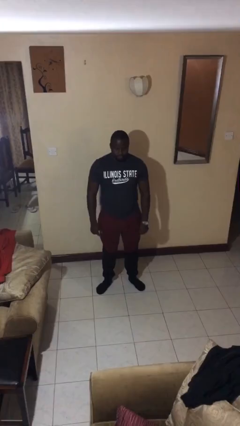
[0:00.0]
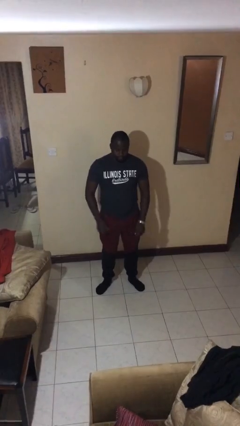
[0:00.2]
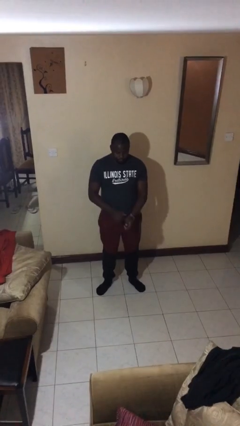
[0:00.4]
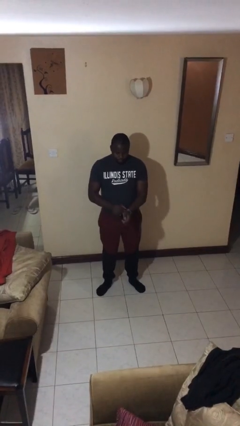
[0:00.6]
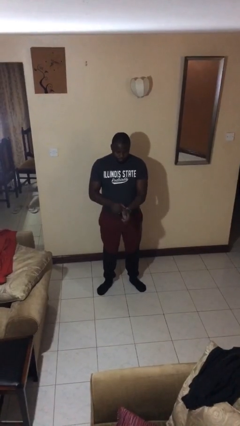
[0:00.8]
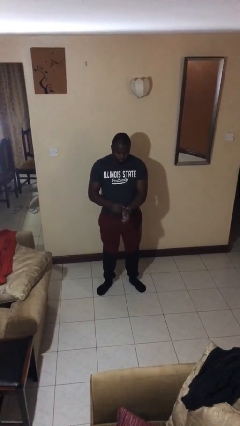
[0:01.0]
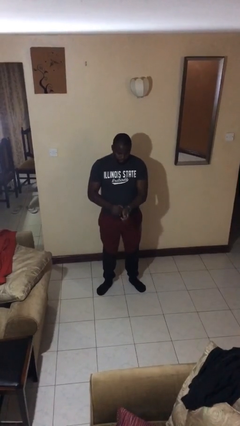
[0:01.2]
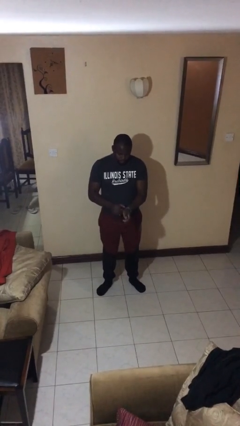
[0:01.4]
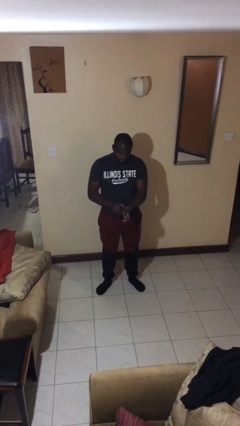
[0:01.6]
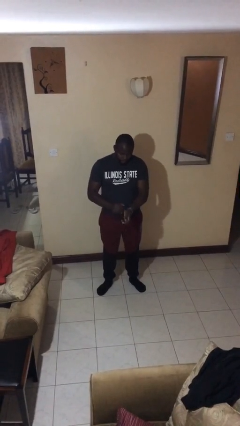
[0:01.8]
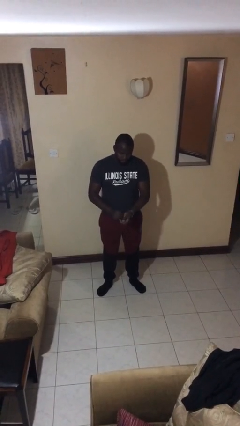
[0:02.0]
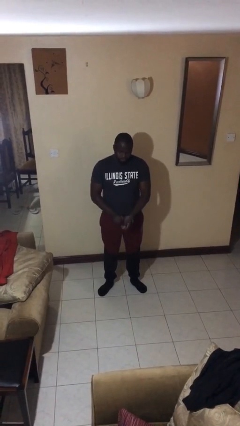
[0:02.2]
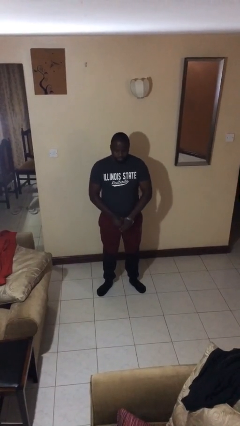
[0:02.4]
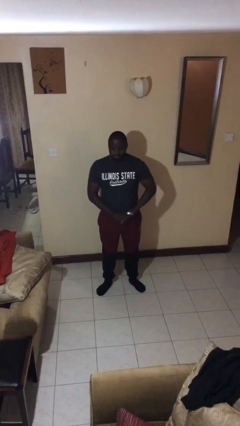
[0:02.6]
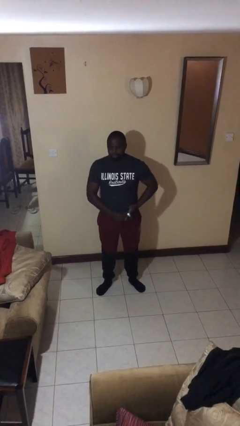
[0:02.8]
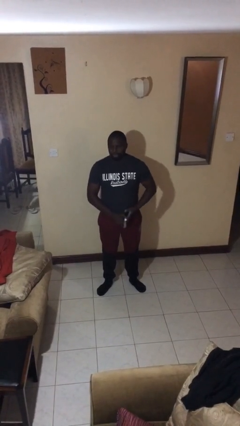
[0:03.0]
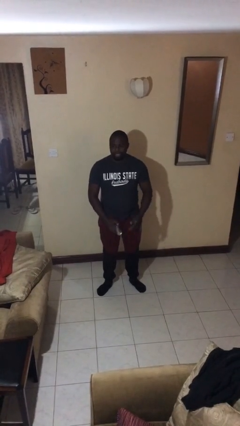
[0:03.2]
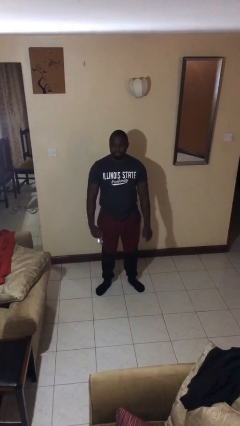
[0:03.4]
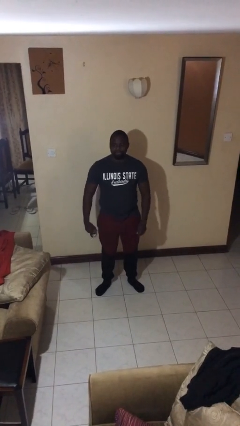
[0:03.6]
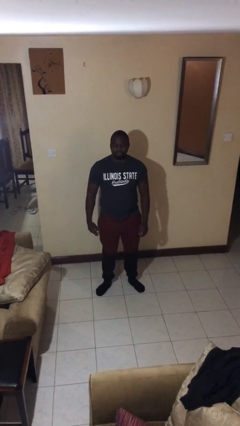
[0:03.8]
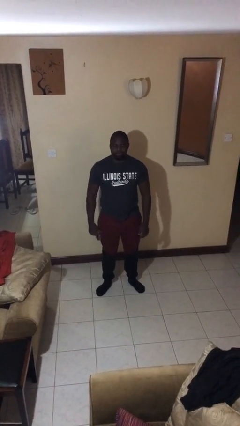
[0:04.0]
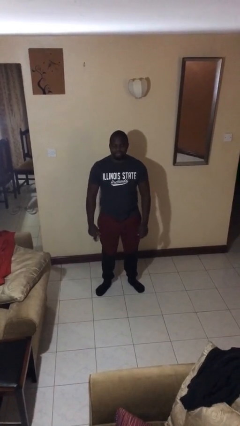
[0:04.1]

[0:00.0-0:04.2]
person takes off wristwatch

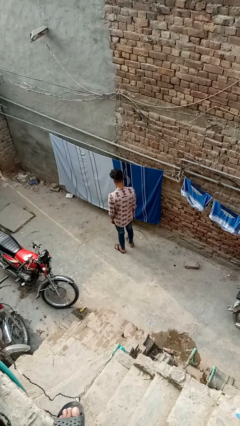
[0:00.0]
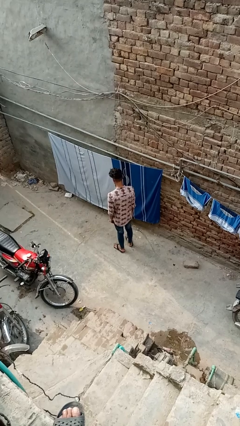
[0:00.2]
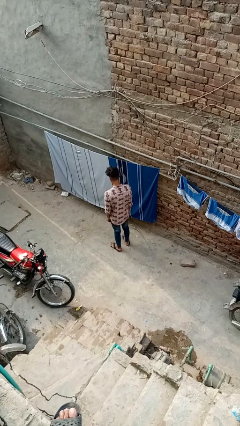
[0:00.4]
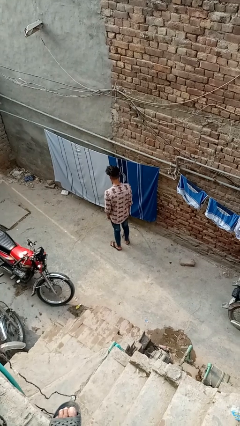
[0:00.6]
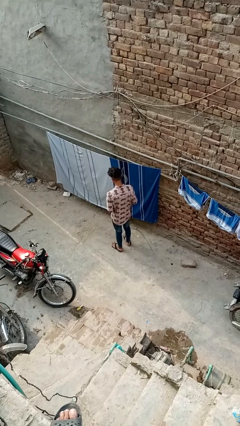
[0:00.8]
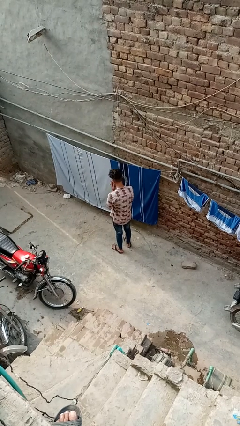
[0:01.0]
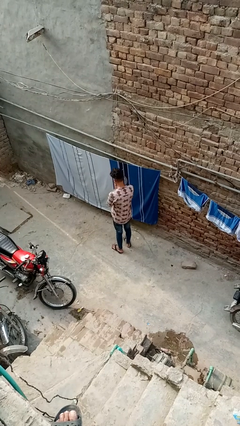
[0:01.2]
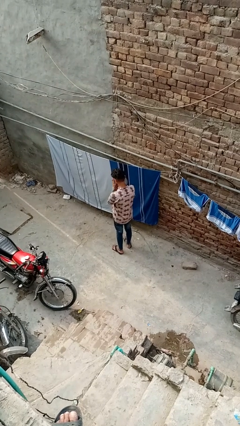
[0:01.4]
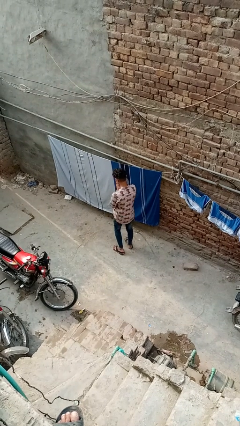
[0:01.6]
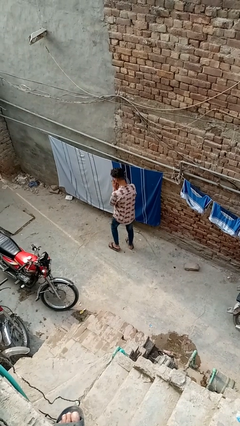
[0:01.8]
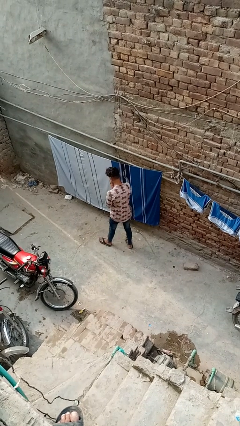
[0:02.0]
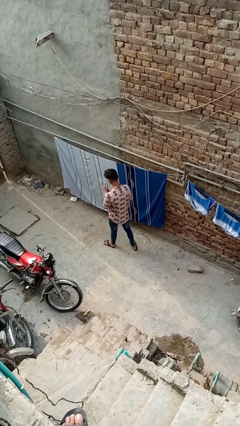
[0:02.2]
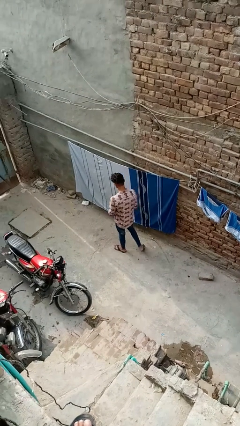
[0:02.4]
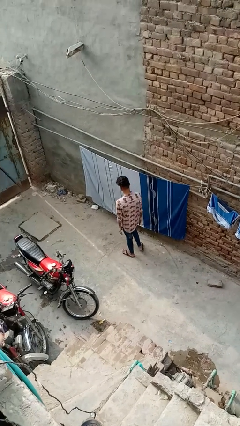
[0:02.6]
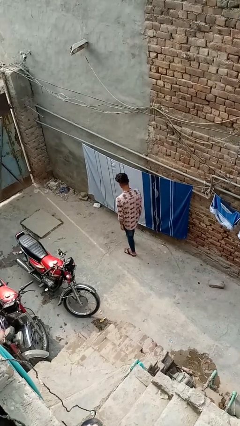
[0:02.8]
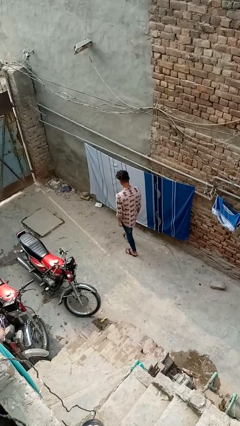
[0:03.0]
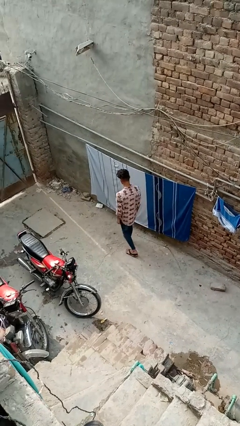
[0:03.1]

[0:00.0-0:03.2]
person blows into hands

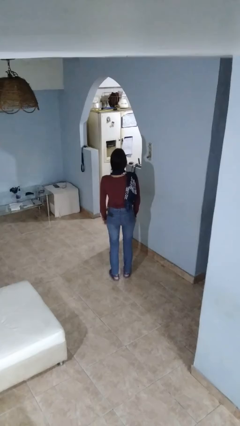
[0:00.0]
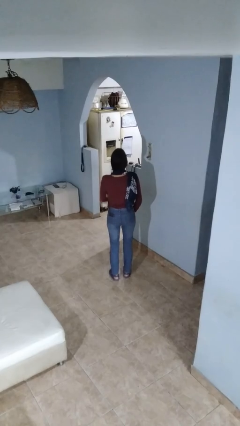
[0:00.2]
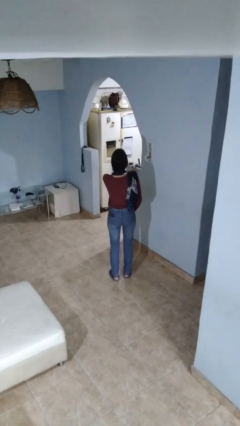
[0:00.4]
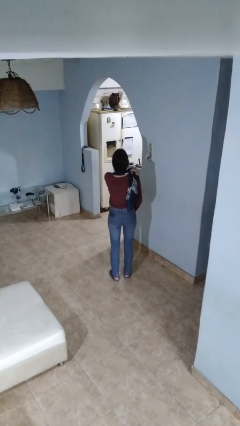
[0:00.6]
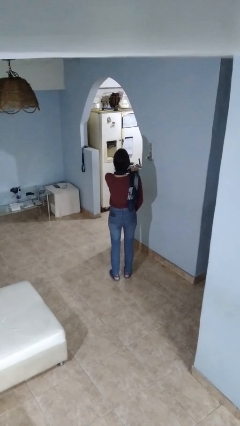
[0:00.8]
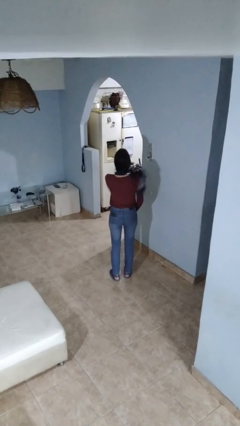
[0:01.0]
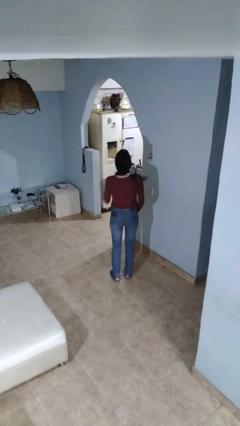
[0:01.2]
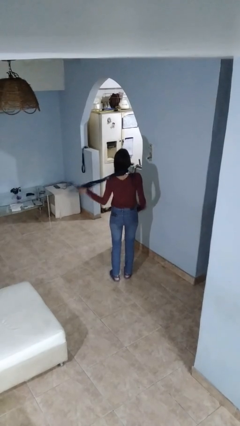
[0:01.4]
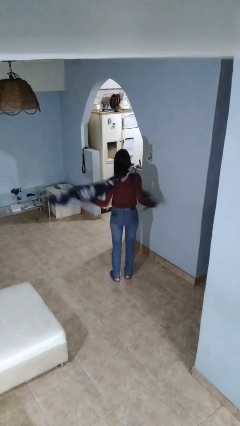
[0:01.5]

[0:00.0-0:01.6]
person takes off scarf

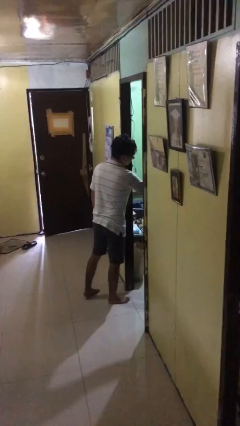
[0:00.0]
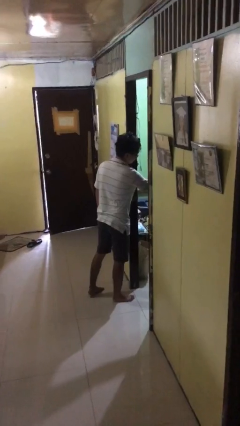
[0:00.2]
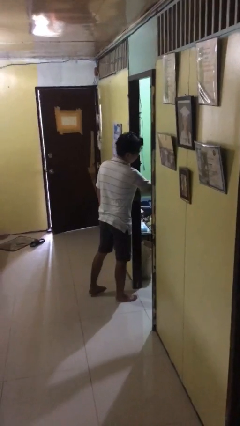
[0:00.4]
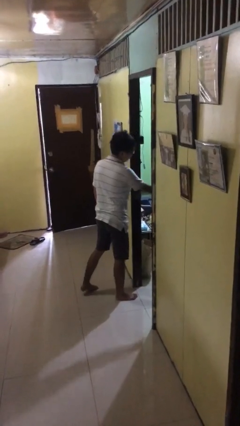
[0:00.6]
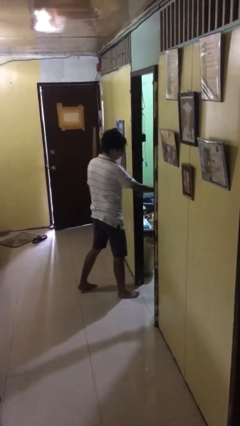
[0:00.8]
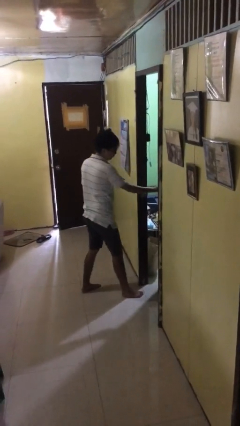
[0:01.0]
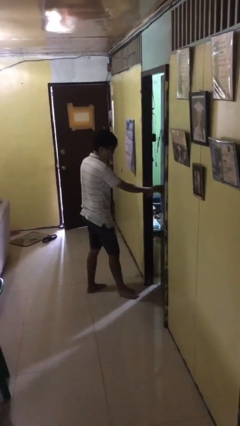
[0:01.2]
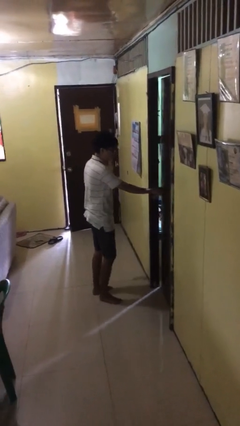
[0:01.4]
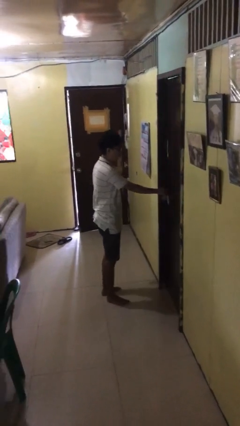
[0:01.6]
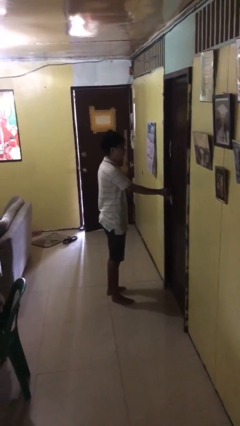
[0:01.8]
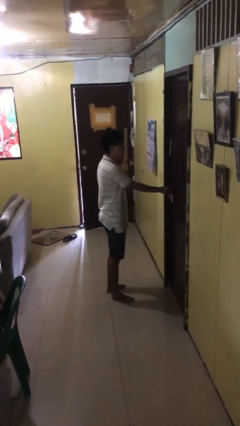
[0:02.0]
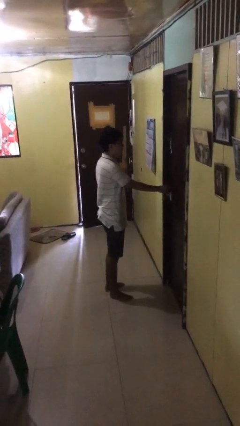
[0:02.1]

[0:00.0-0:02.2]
person closes facility door

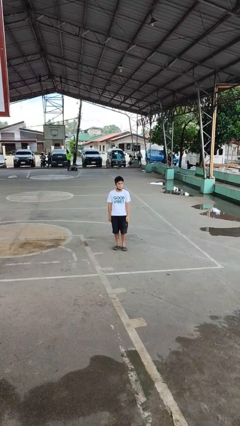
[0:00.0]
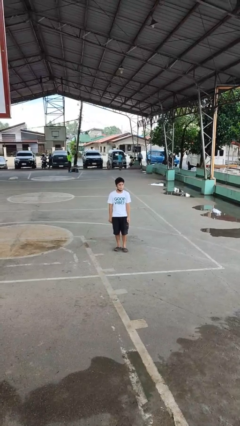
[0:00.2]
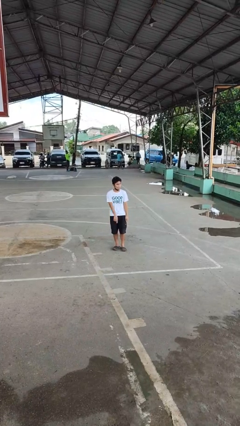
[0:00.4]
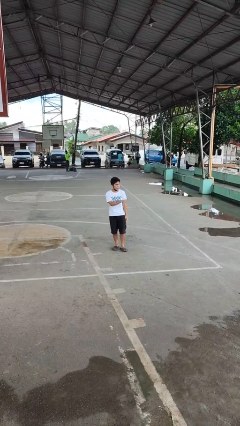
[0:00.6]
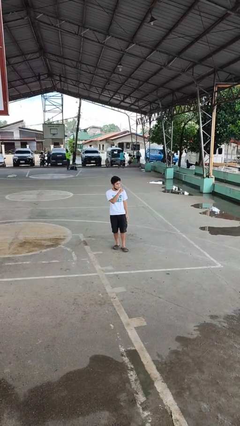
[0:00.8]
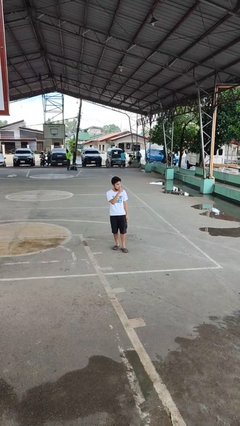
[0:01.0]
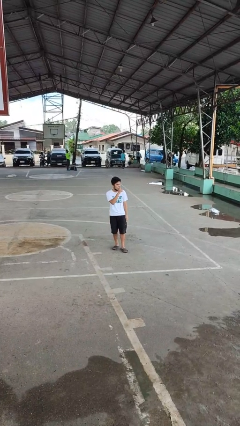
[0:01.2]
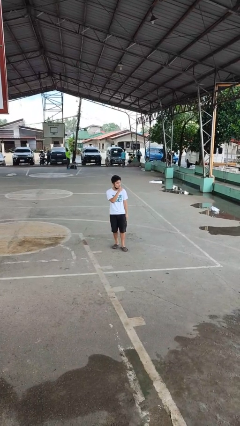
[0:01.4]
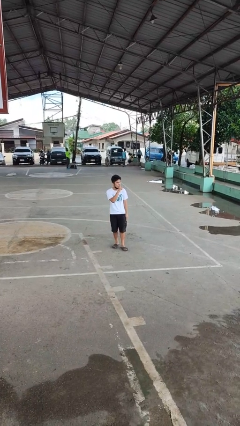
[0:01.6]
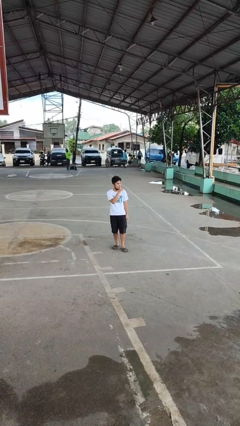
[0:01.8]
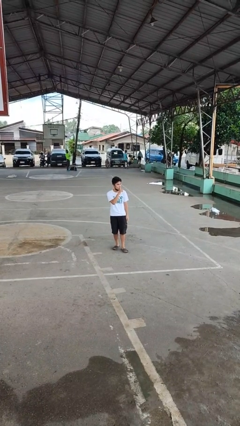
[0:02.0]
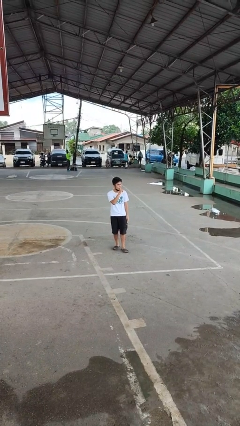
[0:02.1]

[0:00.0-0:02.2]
person gestures be quiet

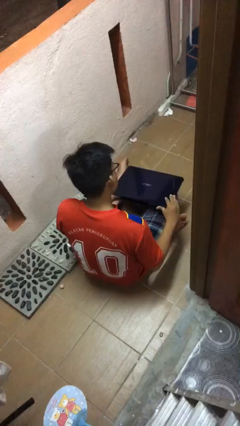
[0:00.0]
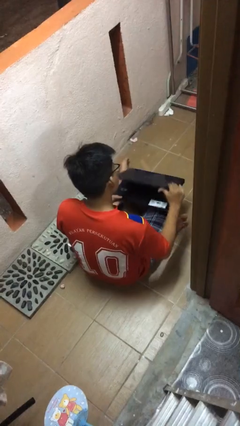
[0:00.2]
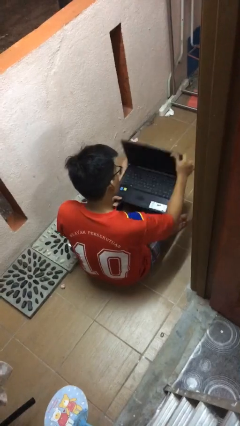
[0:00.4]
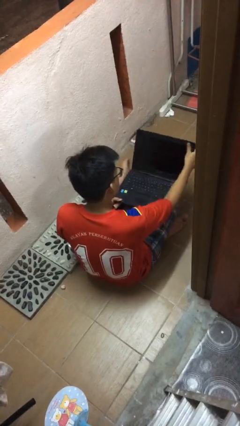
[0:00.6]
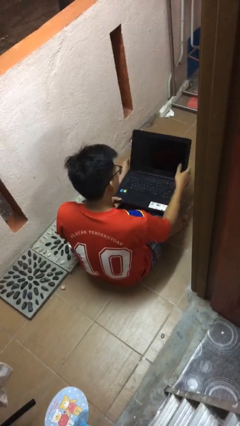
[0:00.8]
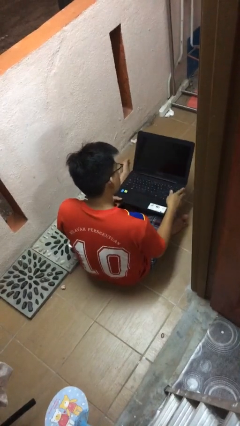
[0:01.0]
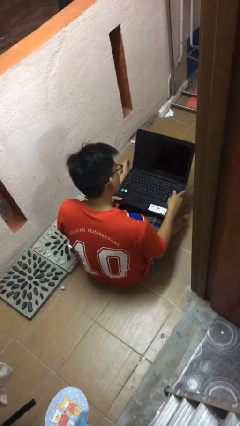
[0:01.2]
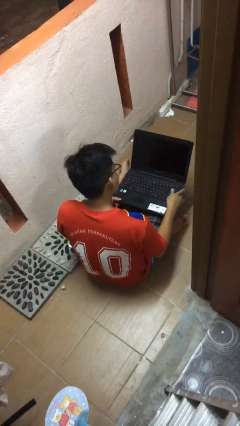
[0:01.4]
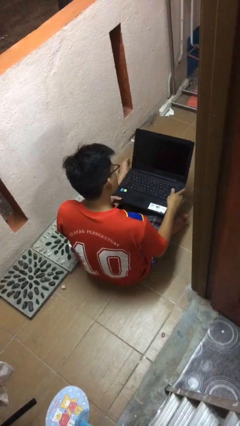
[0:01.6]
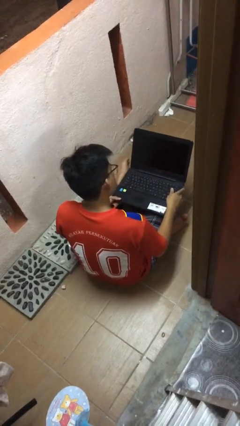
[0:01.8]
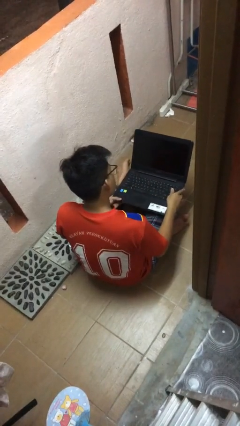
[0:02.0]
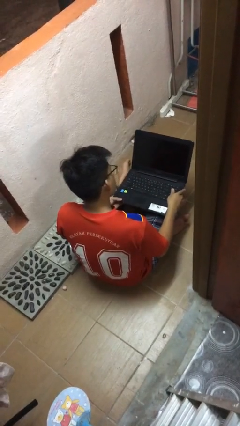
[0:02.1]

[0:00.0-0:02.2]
person opens laptop

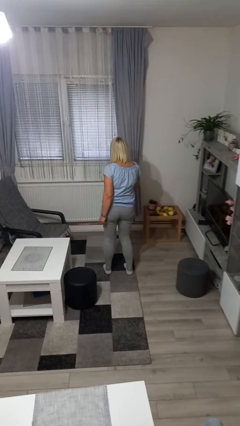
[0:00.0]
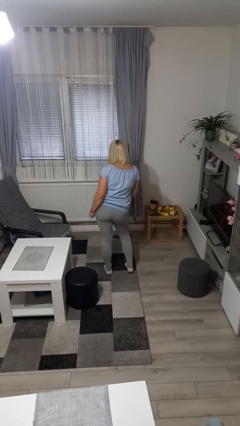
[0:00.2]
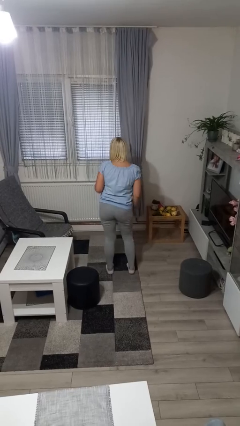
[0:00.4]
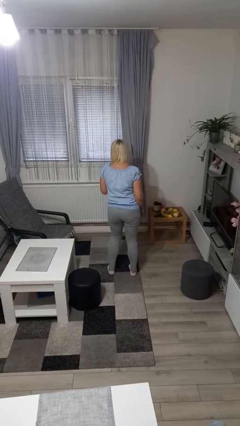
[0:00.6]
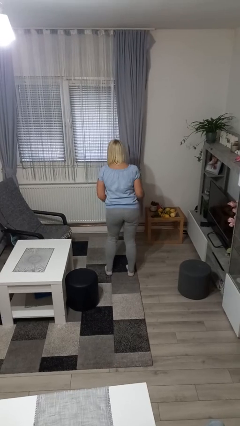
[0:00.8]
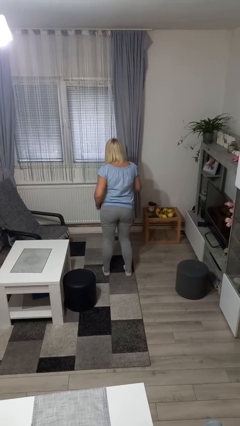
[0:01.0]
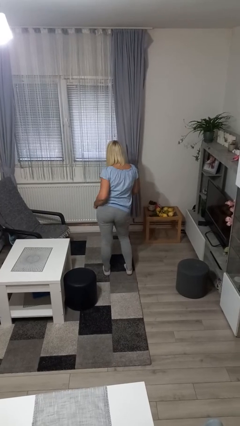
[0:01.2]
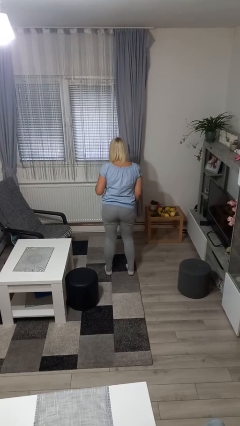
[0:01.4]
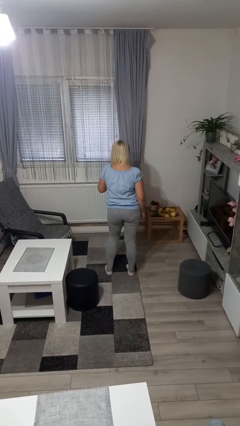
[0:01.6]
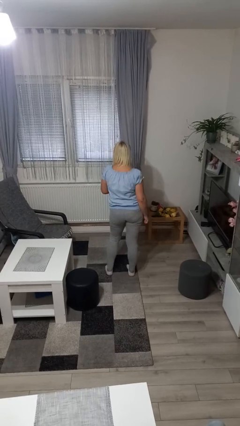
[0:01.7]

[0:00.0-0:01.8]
person dances in place
